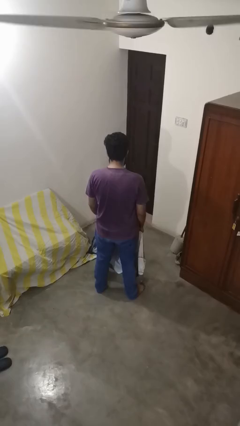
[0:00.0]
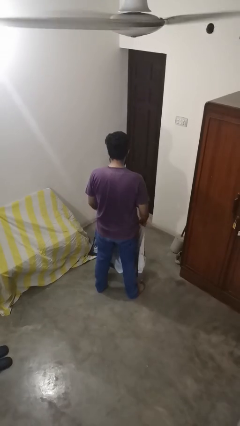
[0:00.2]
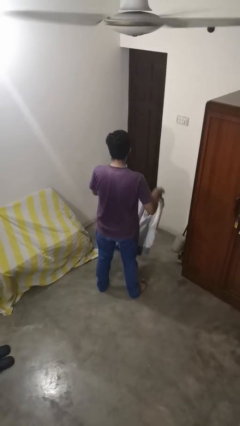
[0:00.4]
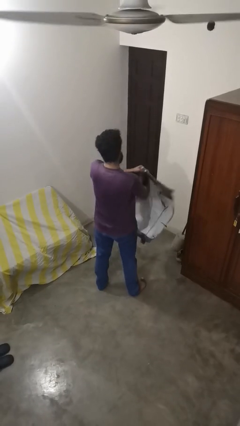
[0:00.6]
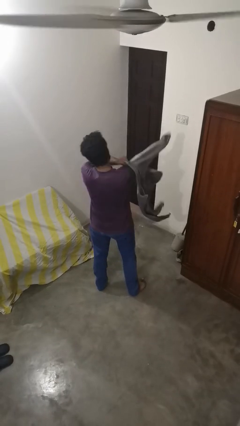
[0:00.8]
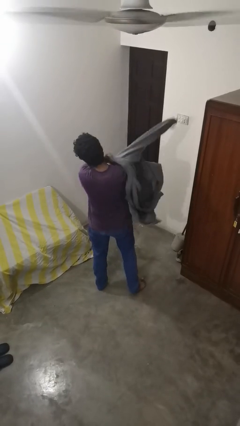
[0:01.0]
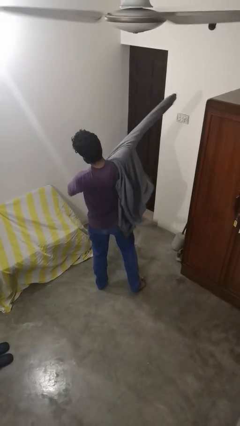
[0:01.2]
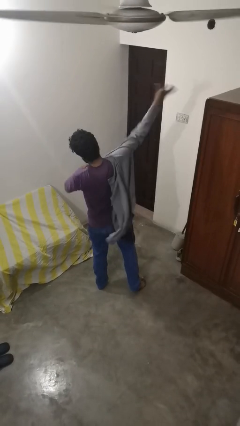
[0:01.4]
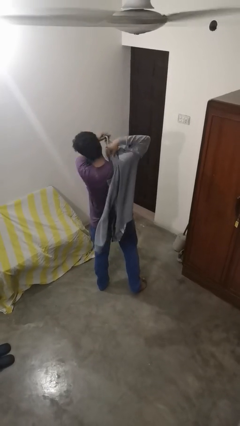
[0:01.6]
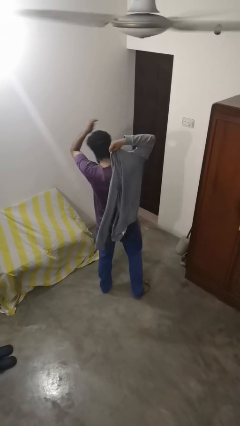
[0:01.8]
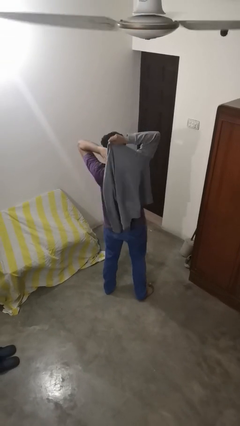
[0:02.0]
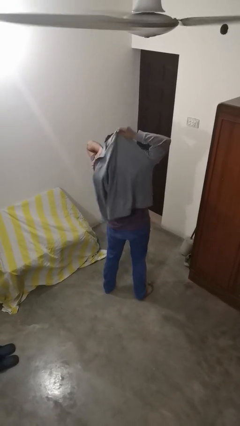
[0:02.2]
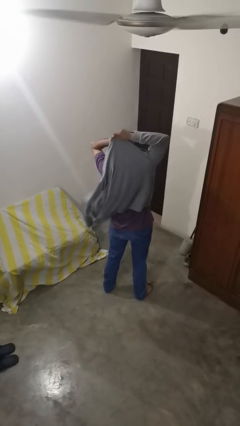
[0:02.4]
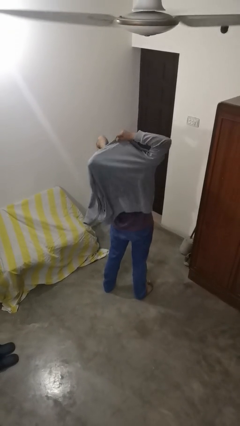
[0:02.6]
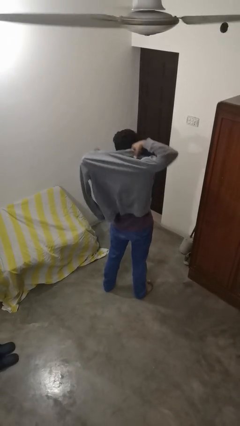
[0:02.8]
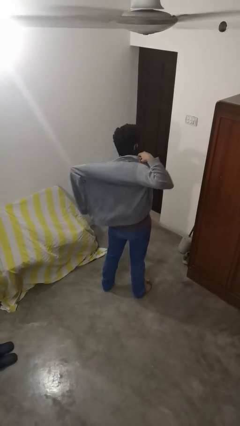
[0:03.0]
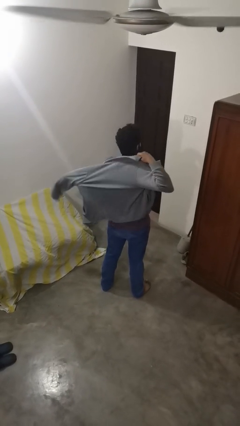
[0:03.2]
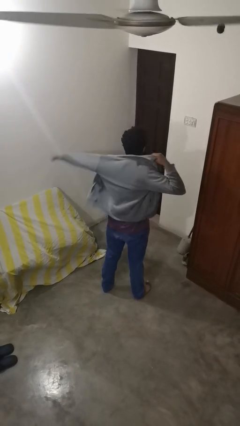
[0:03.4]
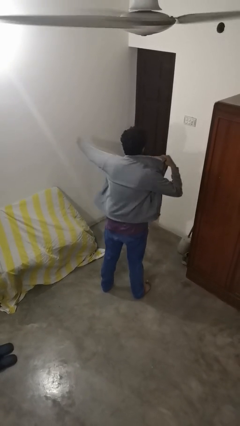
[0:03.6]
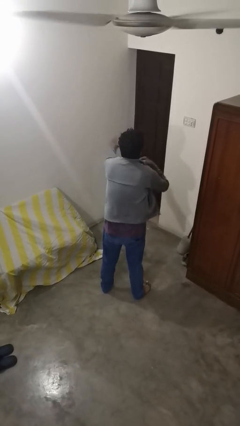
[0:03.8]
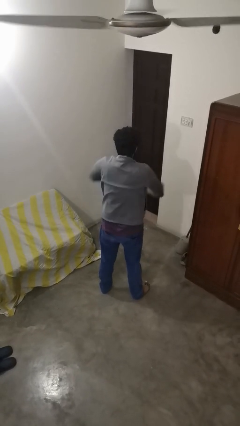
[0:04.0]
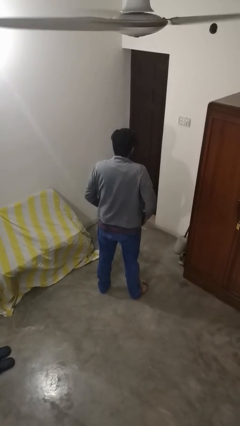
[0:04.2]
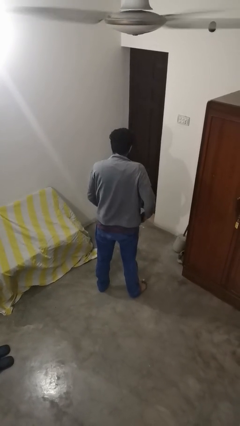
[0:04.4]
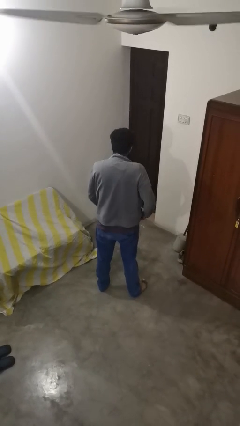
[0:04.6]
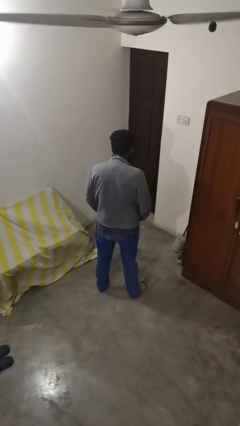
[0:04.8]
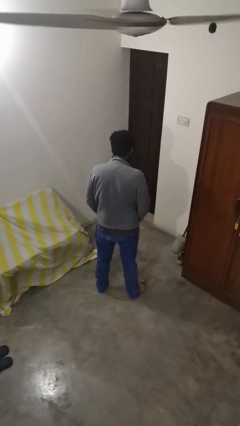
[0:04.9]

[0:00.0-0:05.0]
person puts on jacket

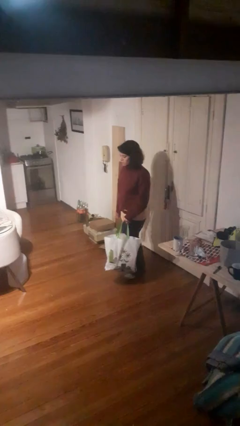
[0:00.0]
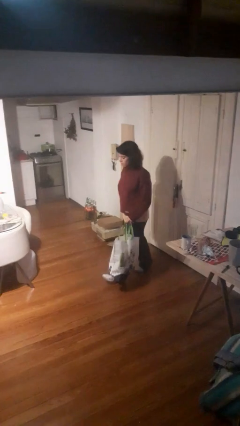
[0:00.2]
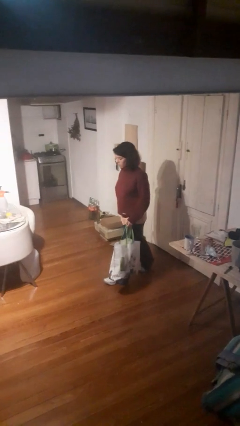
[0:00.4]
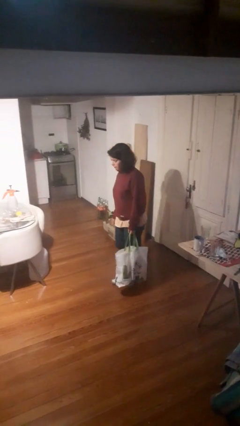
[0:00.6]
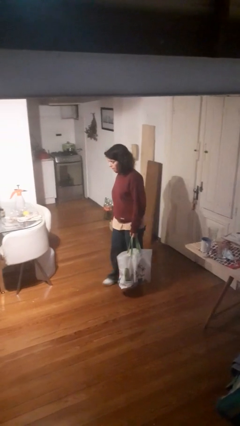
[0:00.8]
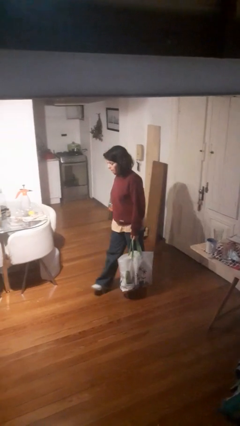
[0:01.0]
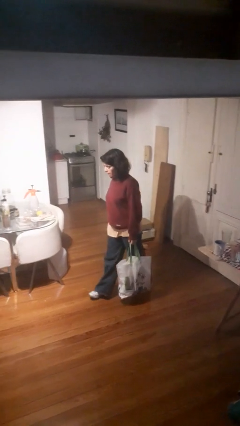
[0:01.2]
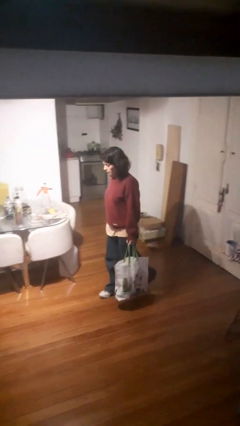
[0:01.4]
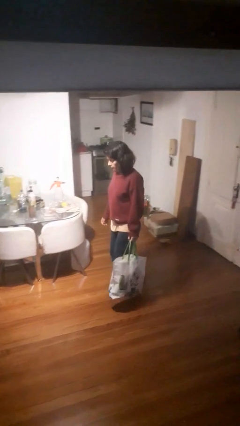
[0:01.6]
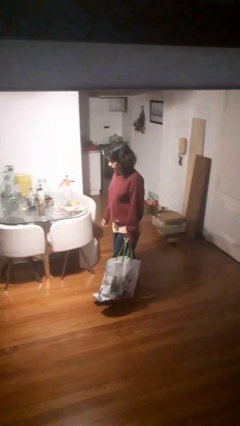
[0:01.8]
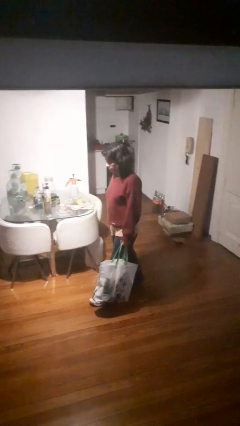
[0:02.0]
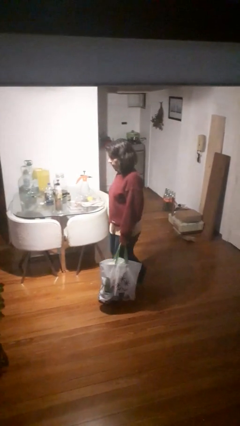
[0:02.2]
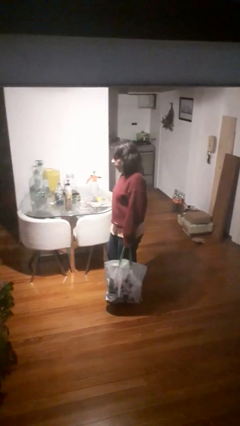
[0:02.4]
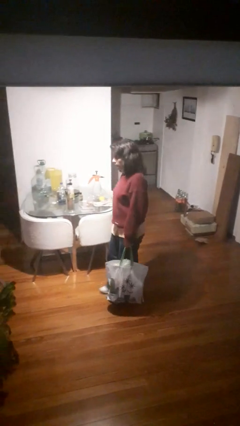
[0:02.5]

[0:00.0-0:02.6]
person carries groceries

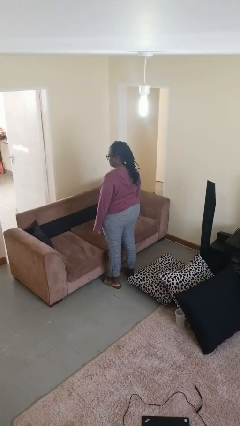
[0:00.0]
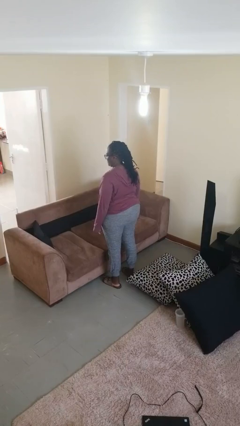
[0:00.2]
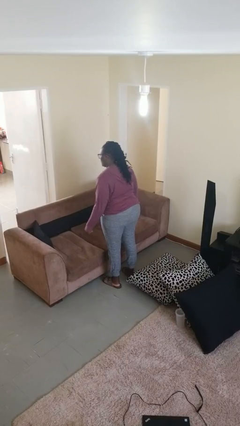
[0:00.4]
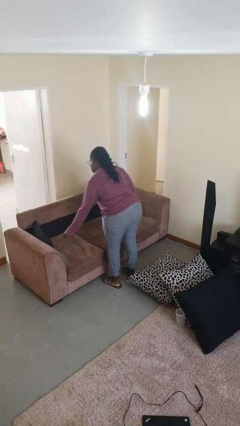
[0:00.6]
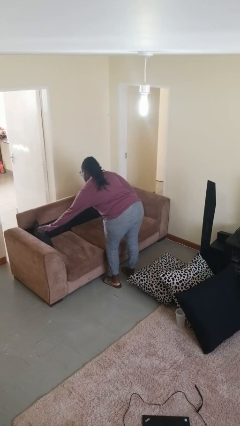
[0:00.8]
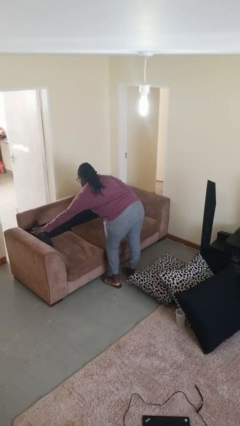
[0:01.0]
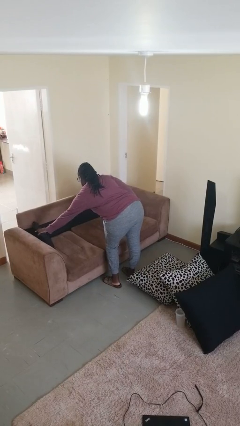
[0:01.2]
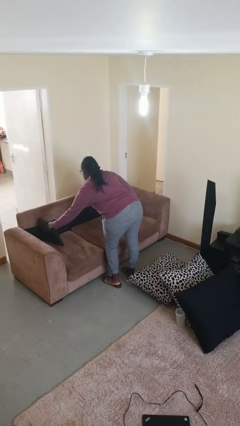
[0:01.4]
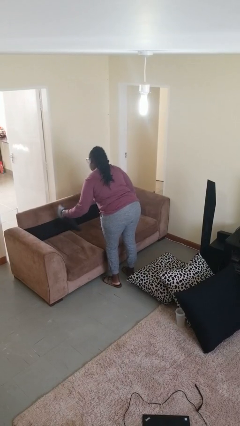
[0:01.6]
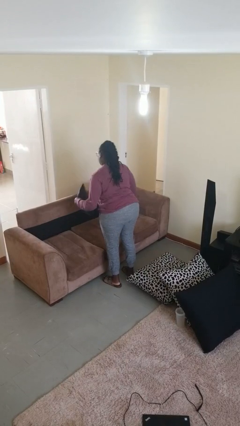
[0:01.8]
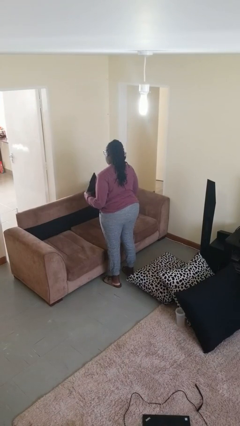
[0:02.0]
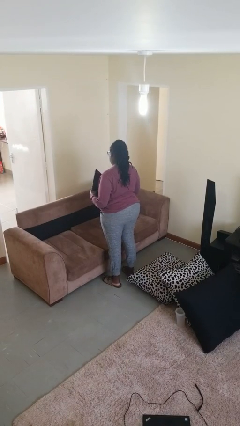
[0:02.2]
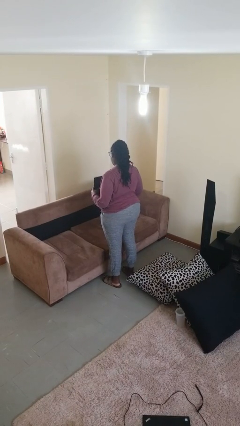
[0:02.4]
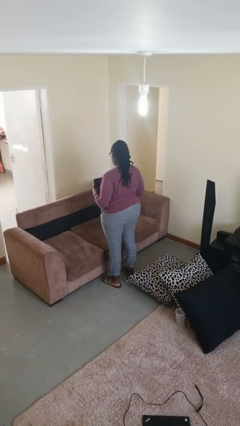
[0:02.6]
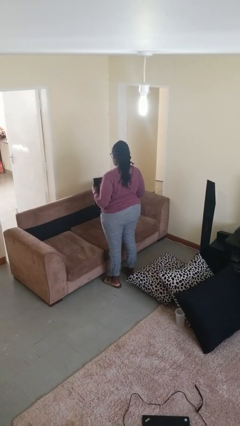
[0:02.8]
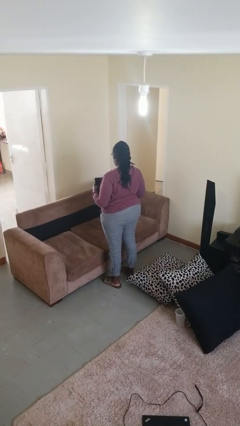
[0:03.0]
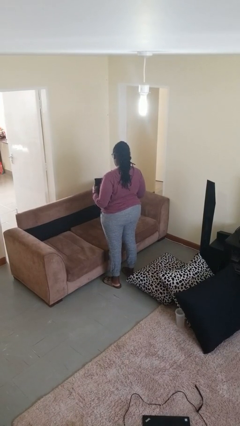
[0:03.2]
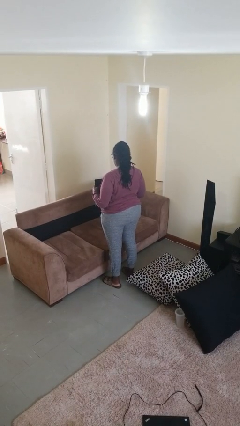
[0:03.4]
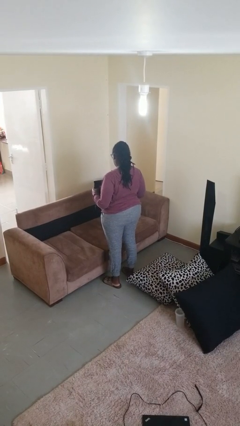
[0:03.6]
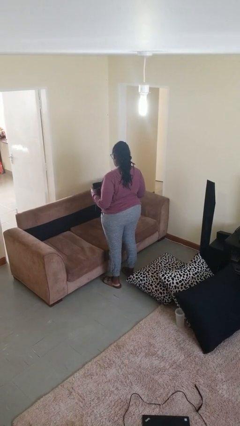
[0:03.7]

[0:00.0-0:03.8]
person picks up object from couch

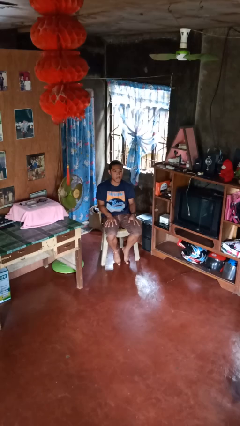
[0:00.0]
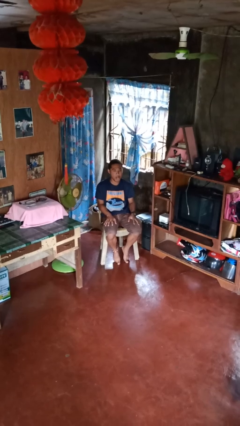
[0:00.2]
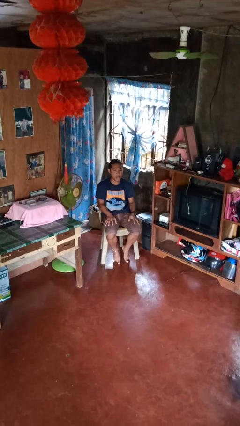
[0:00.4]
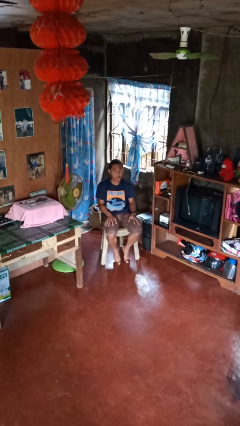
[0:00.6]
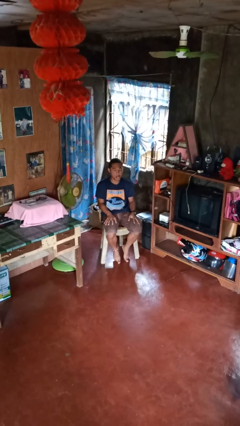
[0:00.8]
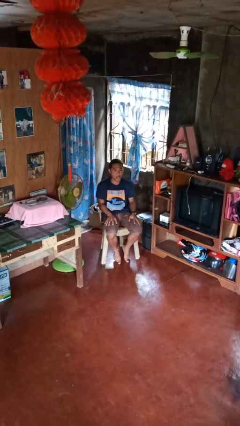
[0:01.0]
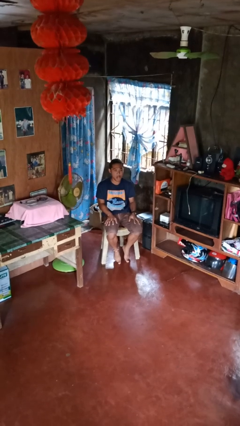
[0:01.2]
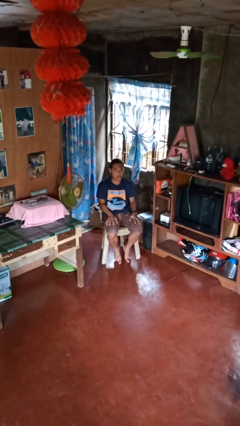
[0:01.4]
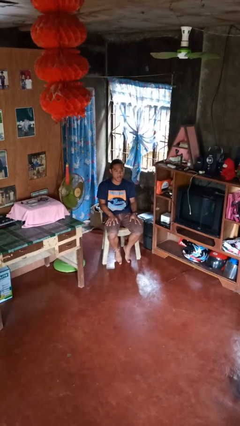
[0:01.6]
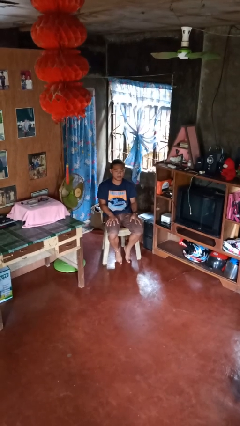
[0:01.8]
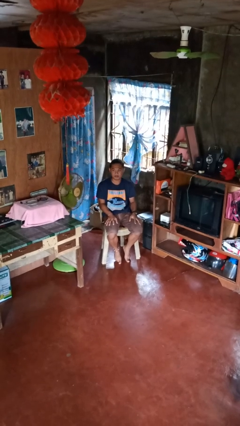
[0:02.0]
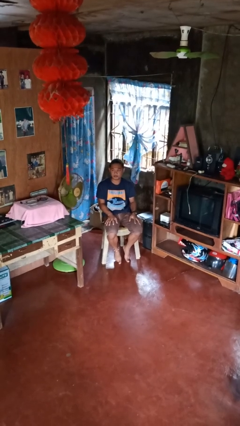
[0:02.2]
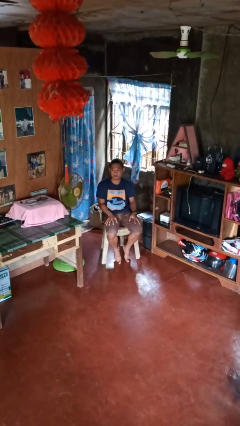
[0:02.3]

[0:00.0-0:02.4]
person sticks out tongue

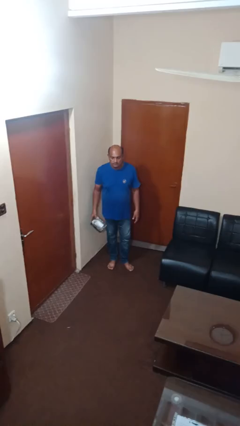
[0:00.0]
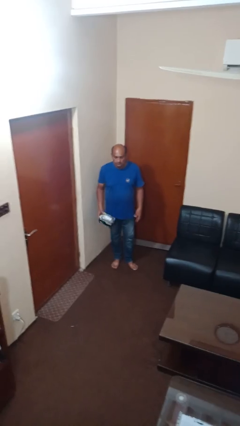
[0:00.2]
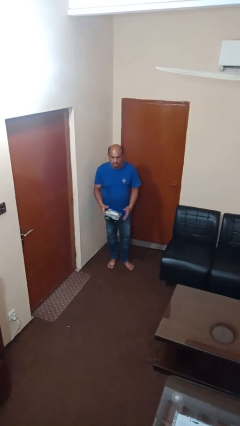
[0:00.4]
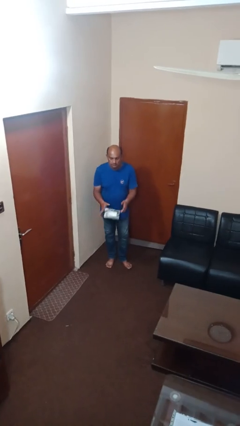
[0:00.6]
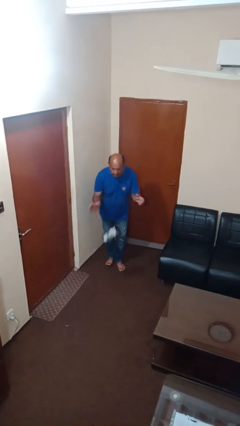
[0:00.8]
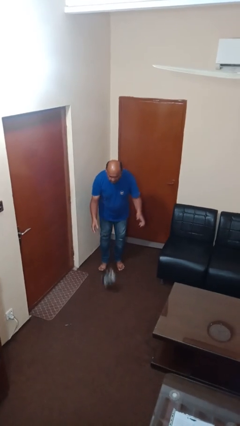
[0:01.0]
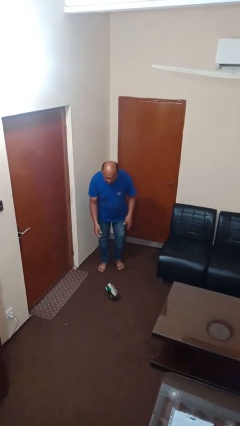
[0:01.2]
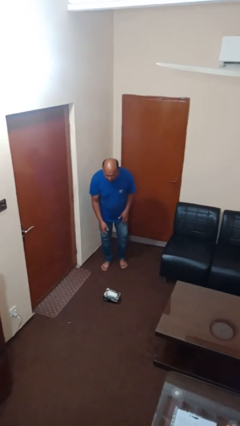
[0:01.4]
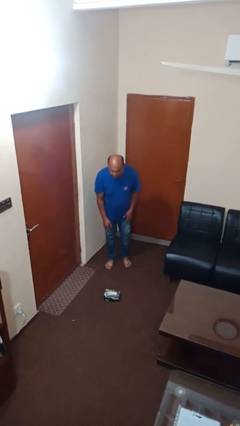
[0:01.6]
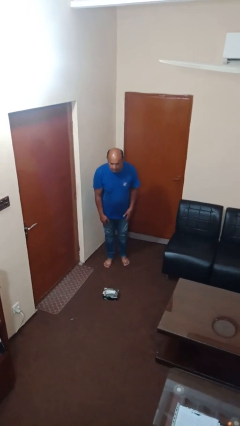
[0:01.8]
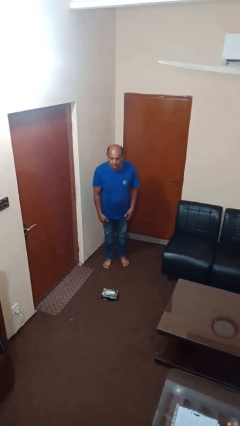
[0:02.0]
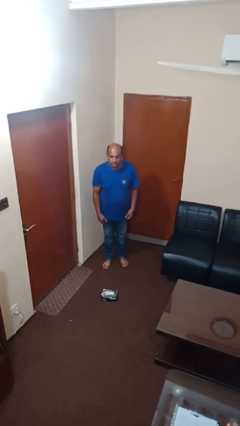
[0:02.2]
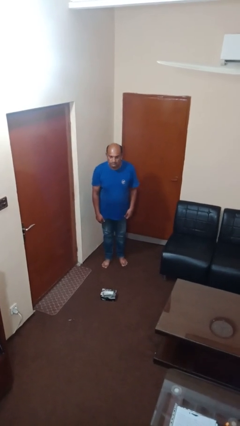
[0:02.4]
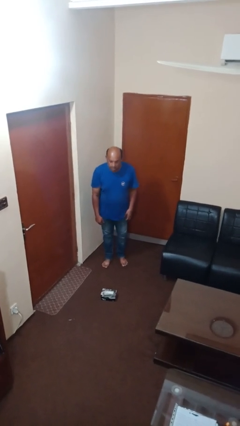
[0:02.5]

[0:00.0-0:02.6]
person drops object

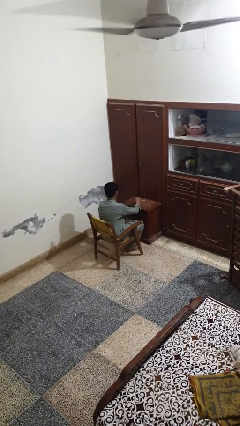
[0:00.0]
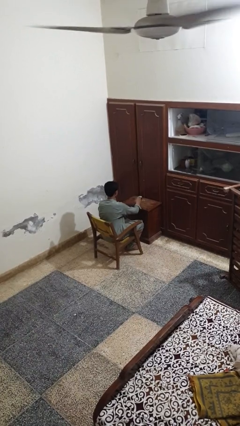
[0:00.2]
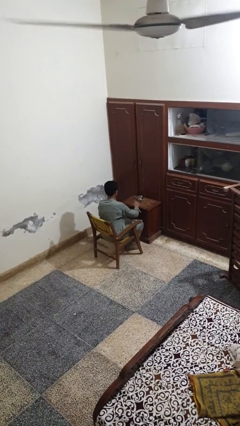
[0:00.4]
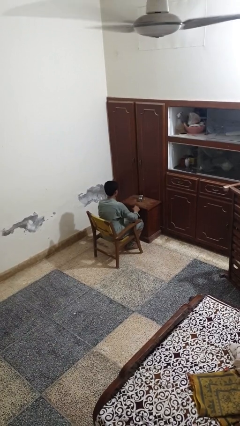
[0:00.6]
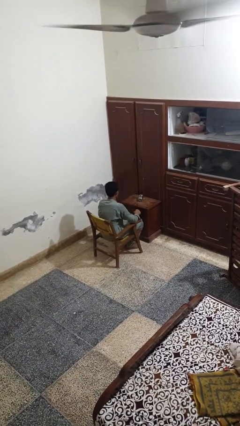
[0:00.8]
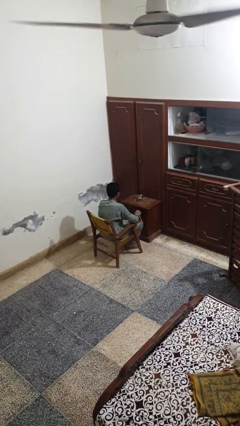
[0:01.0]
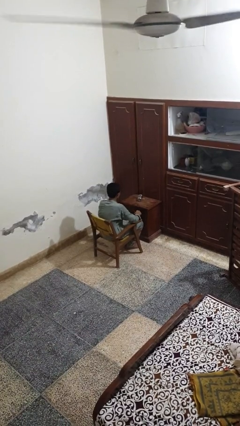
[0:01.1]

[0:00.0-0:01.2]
person knocks over glass
